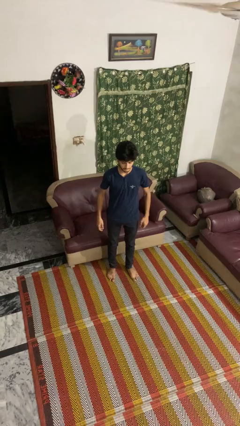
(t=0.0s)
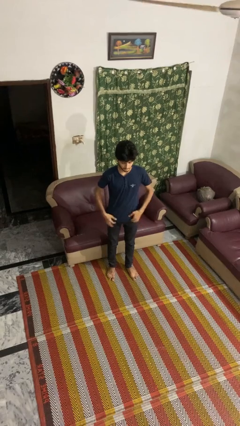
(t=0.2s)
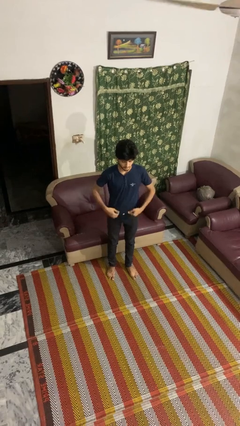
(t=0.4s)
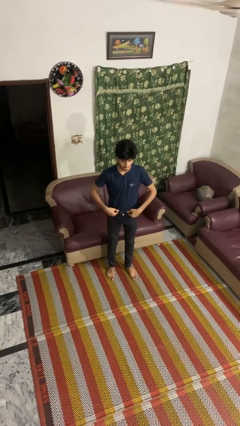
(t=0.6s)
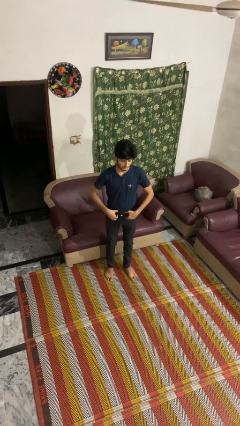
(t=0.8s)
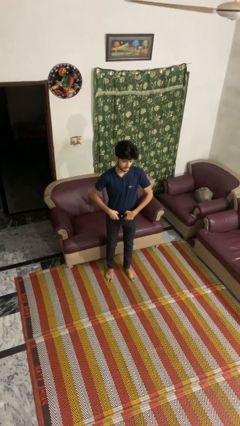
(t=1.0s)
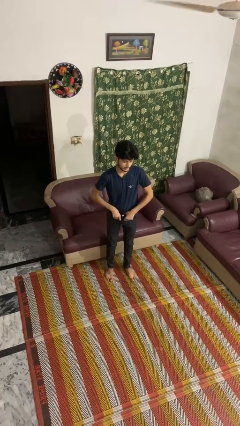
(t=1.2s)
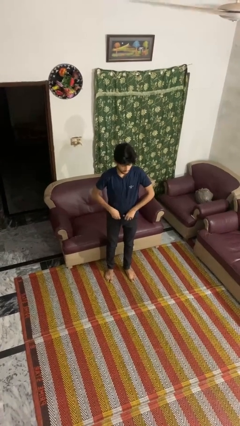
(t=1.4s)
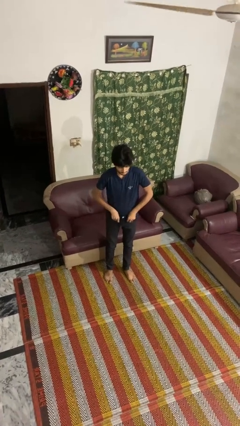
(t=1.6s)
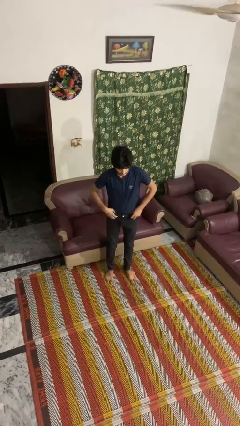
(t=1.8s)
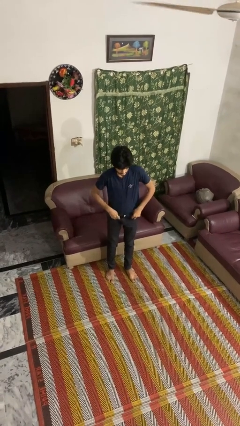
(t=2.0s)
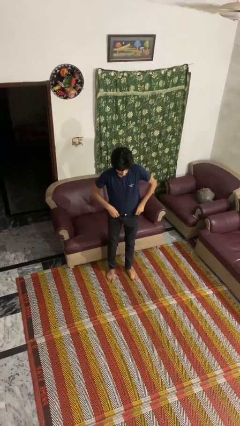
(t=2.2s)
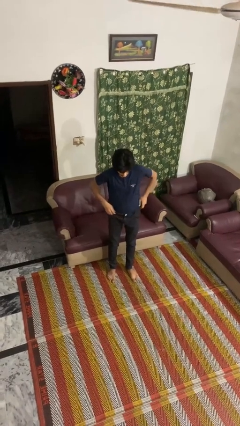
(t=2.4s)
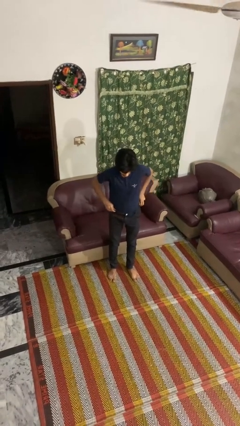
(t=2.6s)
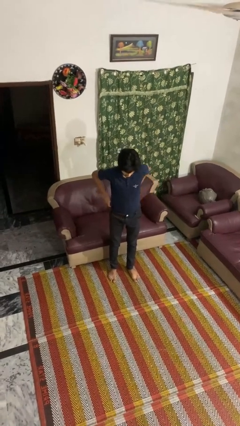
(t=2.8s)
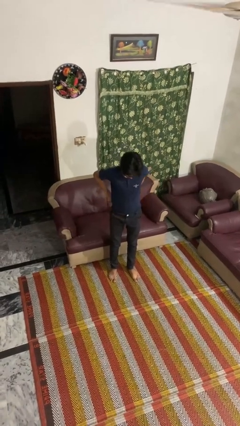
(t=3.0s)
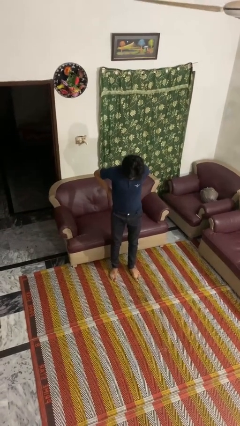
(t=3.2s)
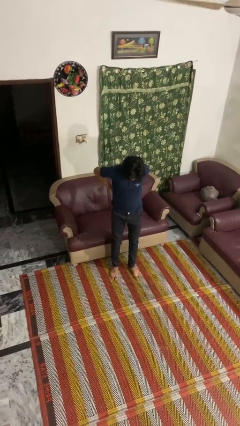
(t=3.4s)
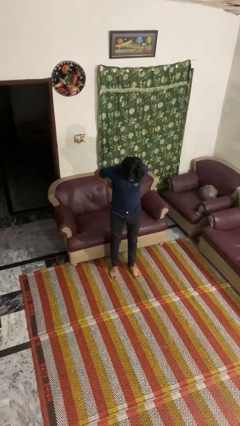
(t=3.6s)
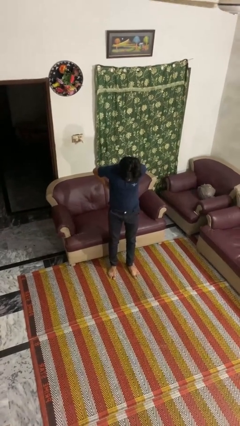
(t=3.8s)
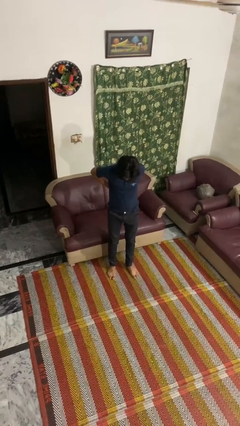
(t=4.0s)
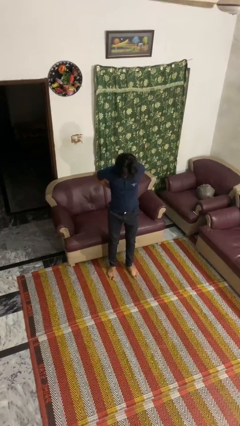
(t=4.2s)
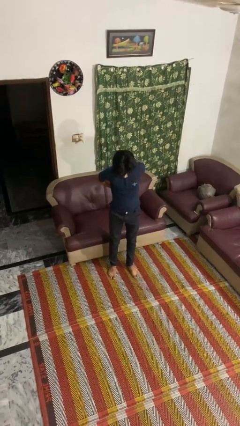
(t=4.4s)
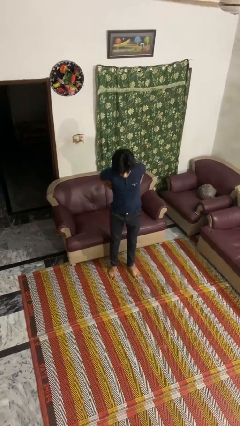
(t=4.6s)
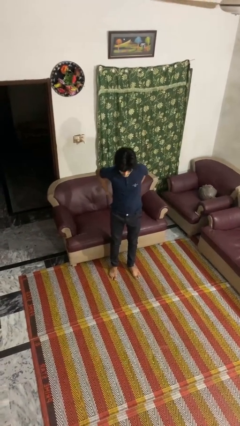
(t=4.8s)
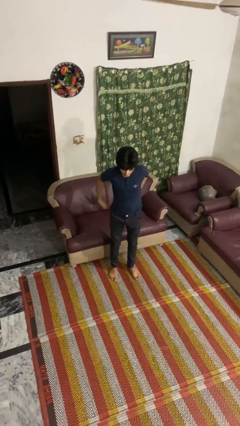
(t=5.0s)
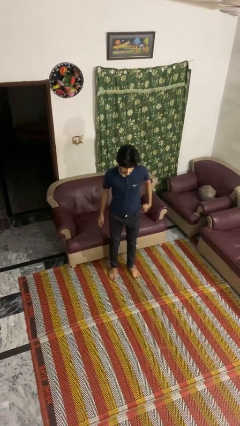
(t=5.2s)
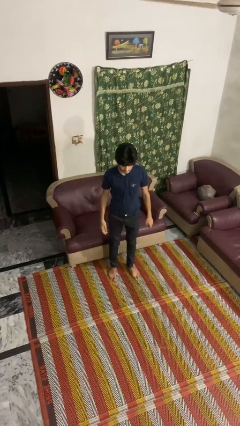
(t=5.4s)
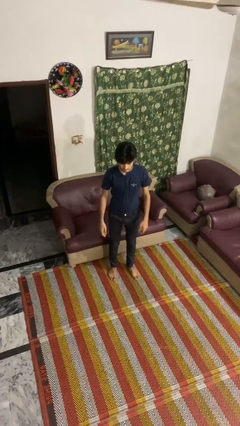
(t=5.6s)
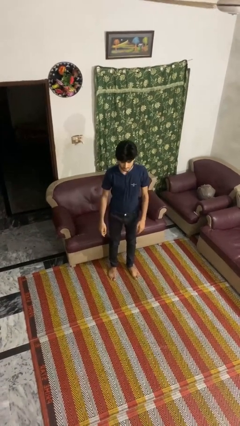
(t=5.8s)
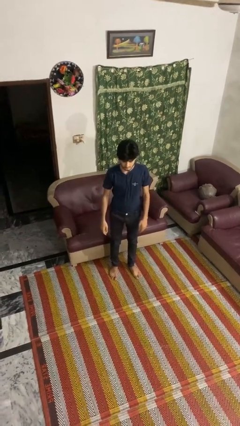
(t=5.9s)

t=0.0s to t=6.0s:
person tucks in shirt

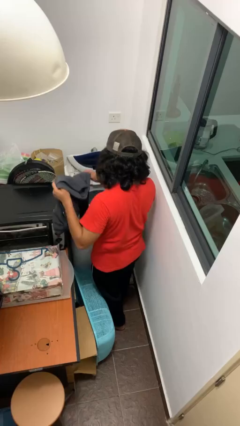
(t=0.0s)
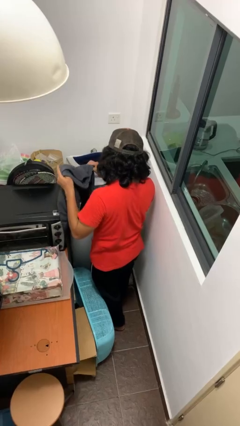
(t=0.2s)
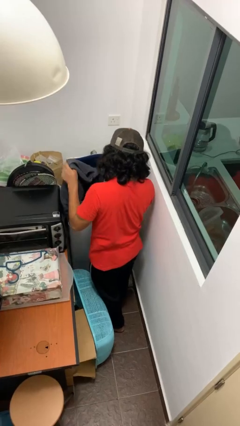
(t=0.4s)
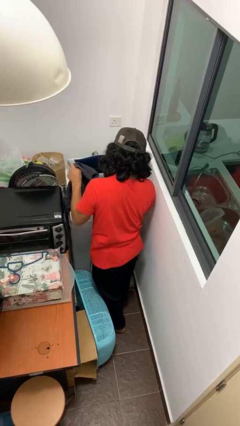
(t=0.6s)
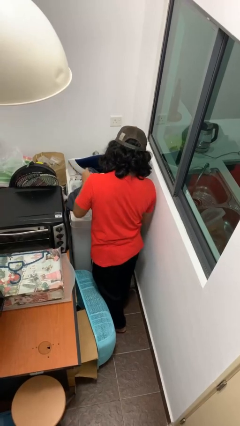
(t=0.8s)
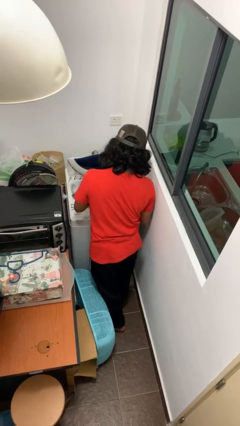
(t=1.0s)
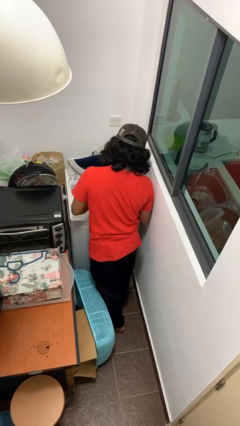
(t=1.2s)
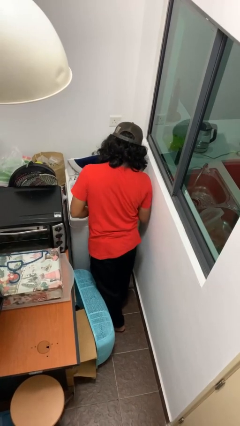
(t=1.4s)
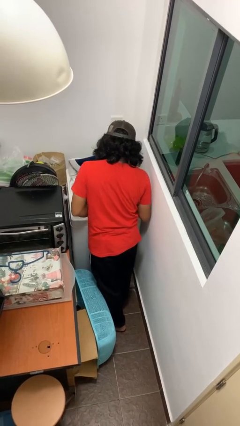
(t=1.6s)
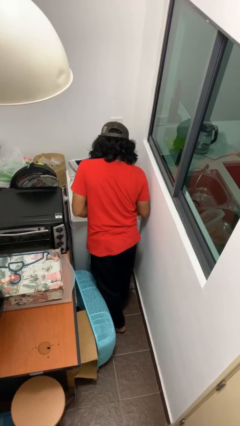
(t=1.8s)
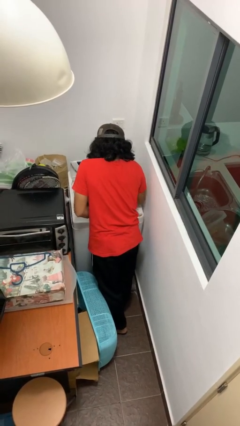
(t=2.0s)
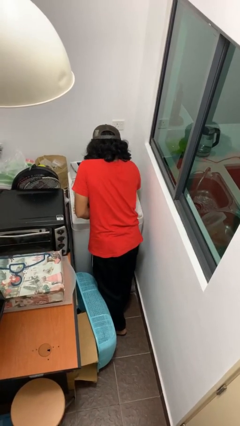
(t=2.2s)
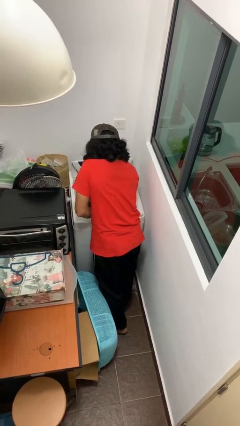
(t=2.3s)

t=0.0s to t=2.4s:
person loads clotheswasher

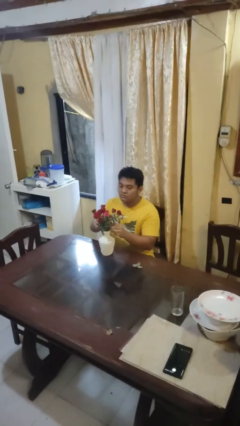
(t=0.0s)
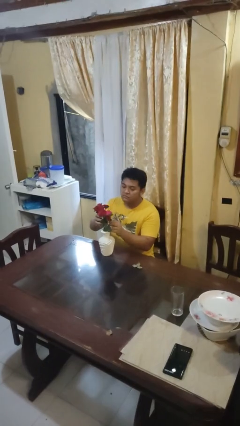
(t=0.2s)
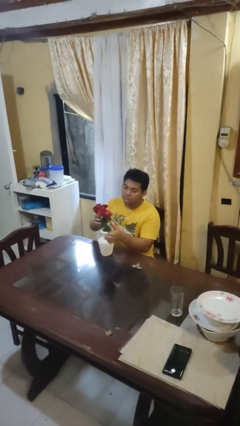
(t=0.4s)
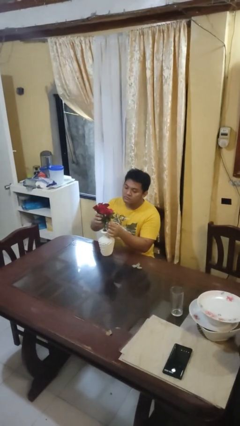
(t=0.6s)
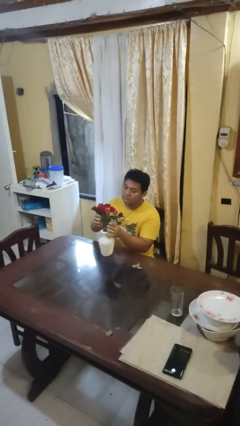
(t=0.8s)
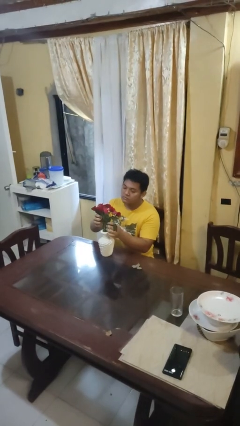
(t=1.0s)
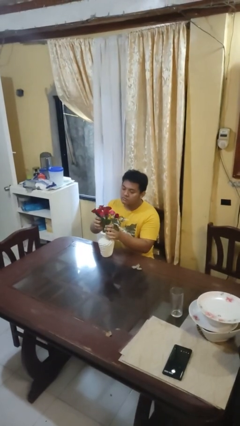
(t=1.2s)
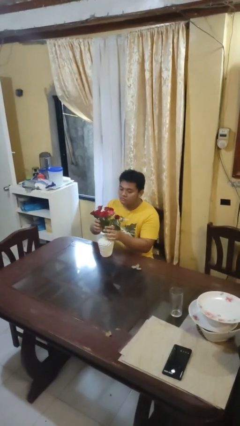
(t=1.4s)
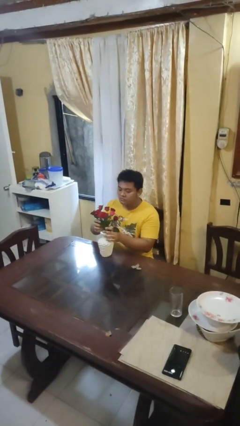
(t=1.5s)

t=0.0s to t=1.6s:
person arranges flowers in vase

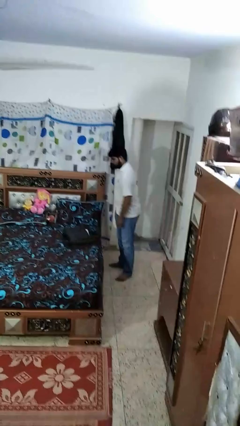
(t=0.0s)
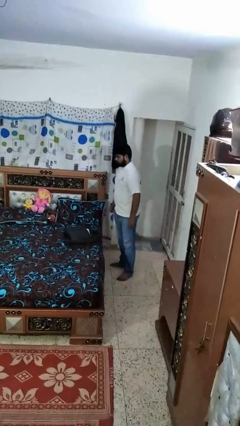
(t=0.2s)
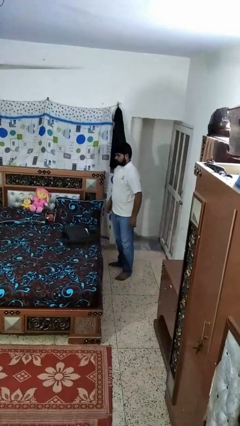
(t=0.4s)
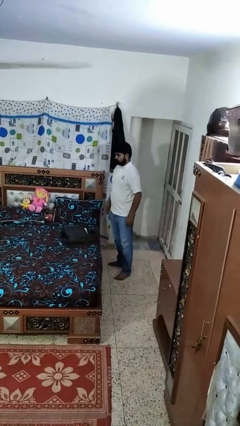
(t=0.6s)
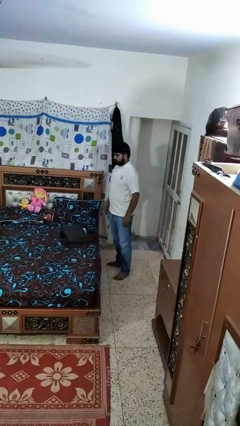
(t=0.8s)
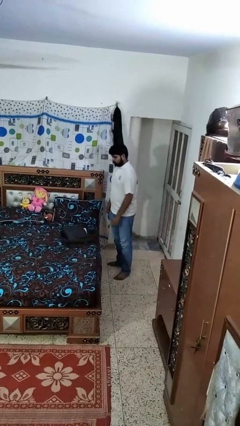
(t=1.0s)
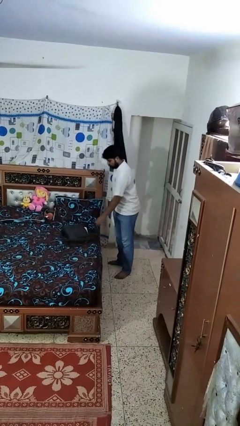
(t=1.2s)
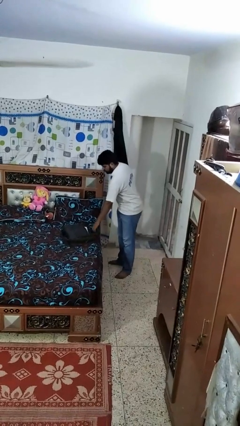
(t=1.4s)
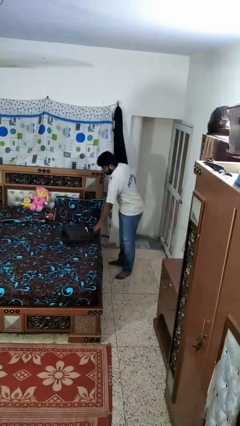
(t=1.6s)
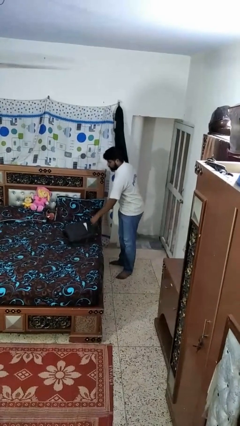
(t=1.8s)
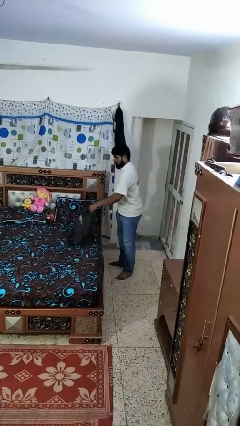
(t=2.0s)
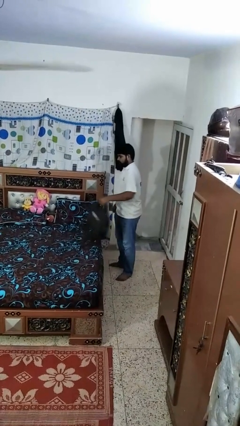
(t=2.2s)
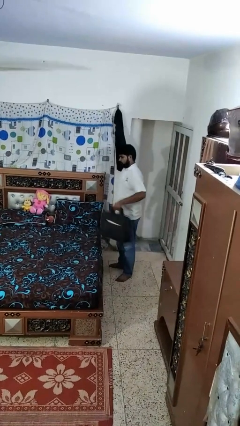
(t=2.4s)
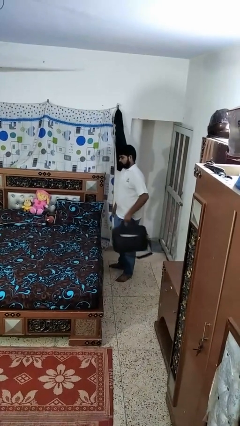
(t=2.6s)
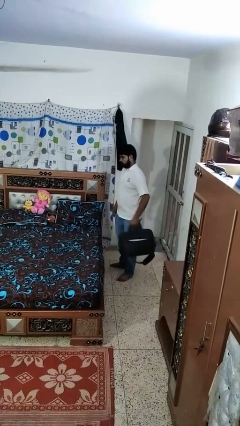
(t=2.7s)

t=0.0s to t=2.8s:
person picks up object from bed

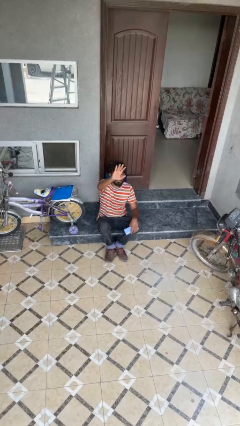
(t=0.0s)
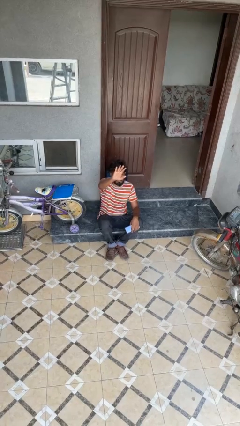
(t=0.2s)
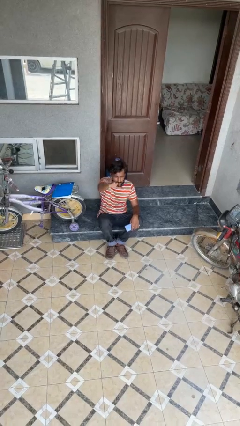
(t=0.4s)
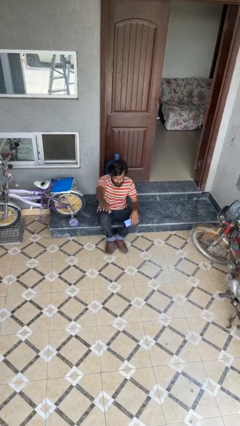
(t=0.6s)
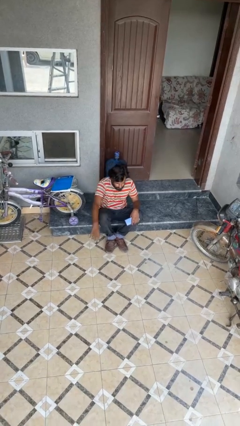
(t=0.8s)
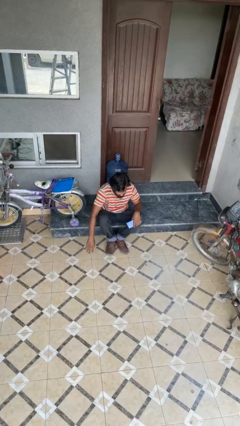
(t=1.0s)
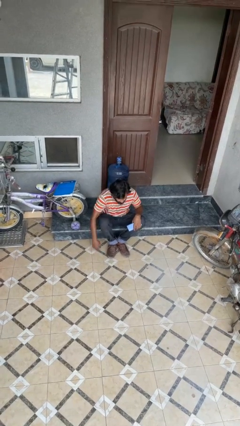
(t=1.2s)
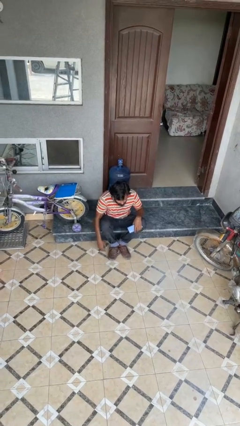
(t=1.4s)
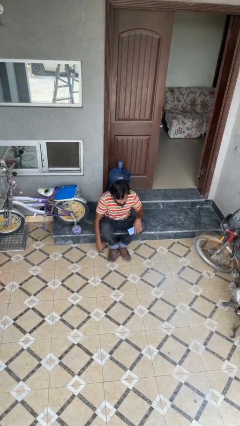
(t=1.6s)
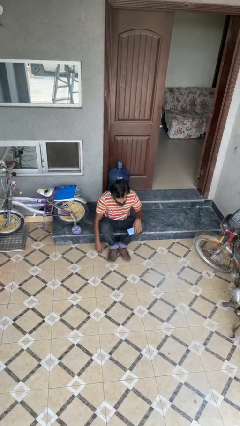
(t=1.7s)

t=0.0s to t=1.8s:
person gestures lower hand

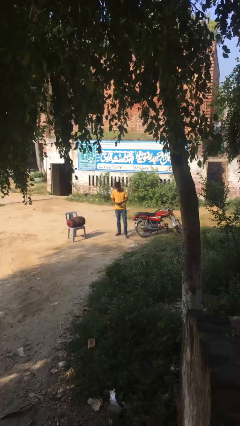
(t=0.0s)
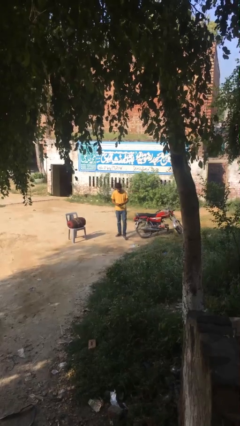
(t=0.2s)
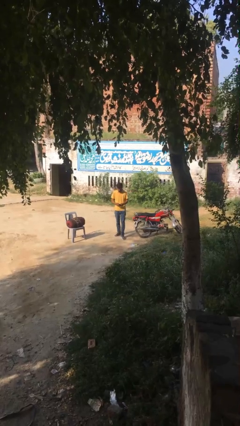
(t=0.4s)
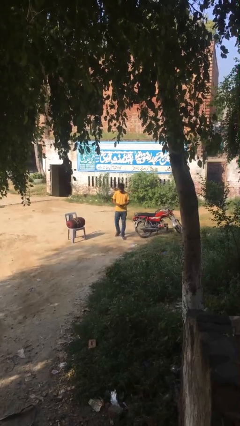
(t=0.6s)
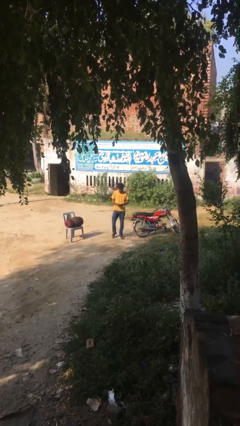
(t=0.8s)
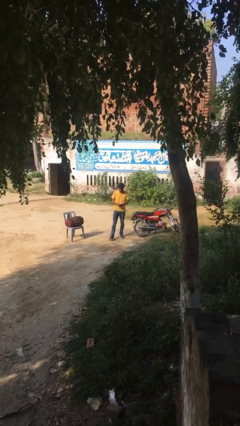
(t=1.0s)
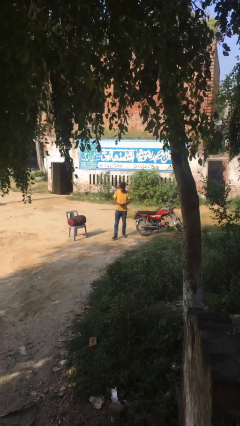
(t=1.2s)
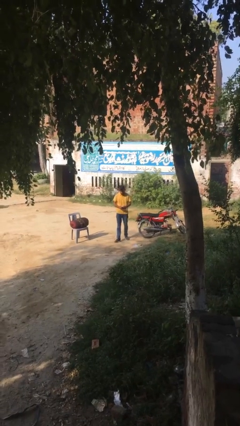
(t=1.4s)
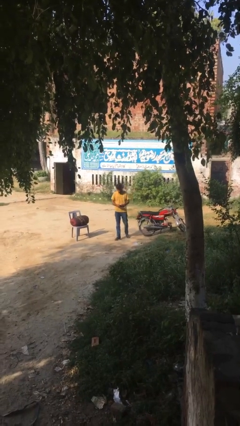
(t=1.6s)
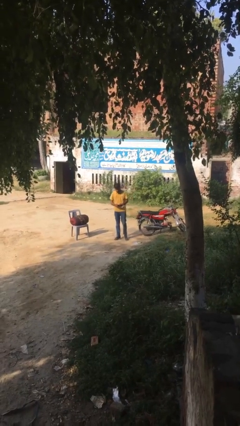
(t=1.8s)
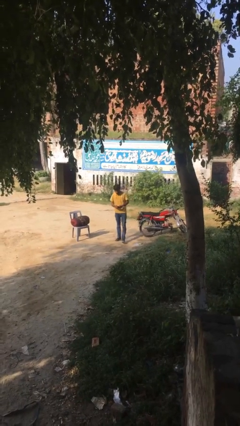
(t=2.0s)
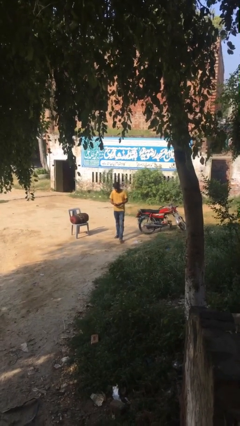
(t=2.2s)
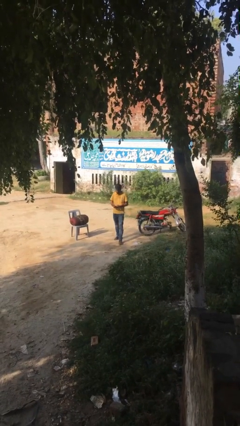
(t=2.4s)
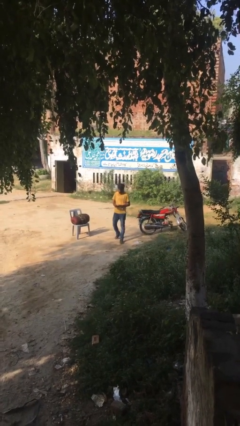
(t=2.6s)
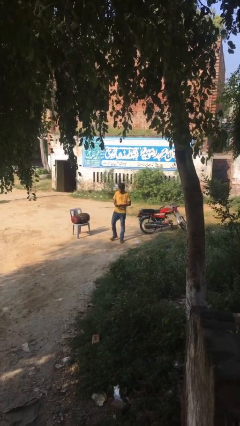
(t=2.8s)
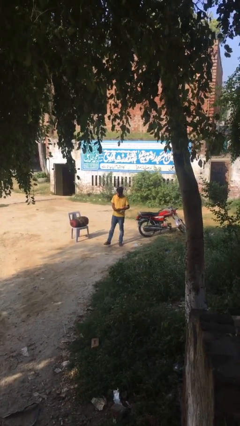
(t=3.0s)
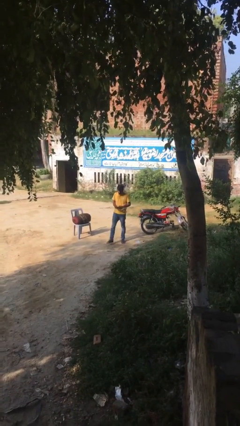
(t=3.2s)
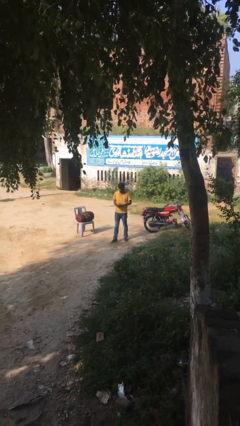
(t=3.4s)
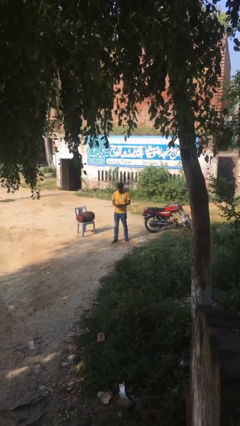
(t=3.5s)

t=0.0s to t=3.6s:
person texts on phone
